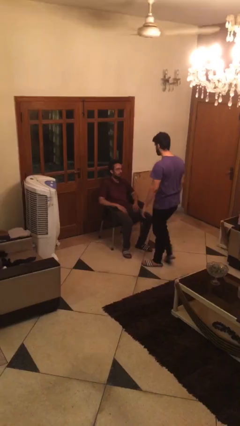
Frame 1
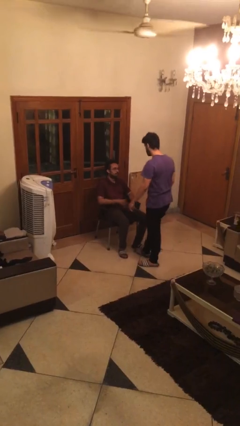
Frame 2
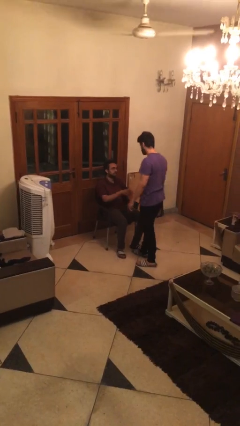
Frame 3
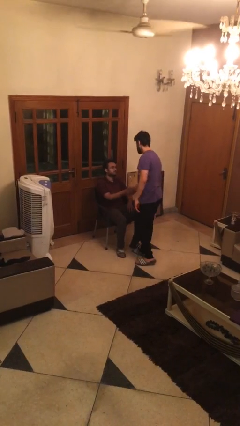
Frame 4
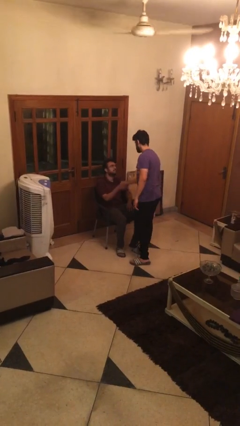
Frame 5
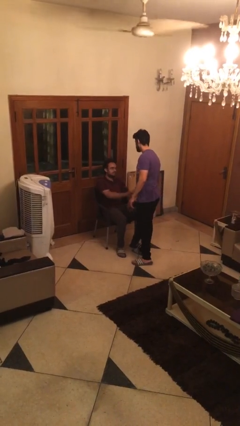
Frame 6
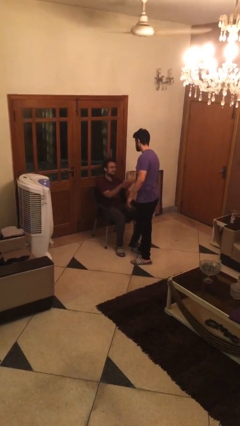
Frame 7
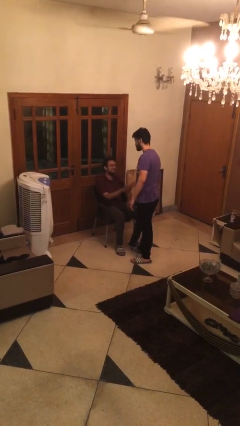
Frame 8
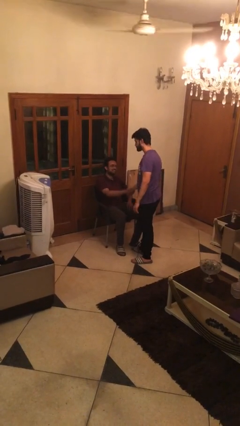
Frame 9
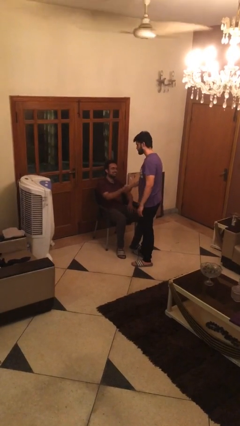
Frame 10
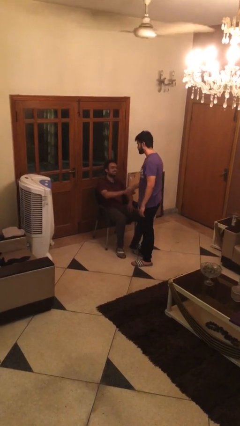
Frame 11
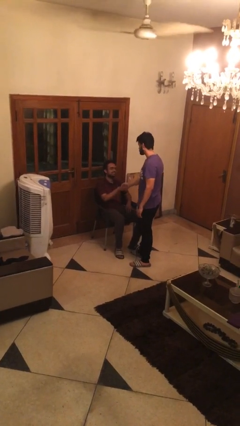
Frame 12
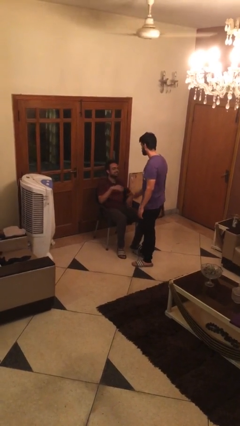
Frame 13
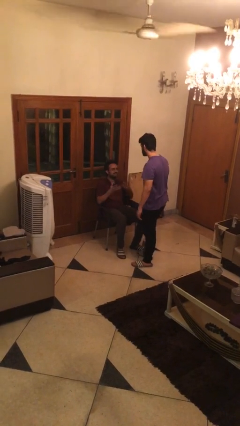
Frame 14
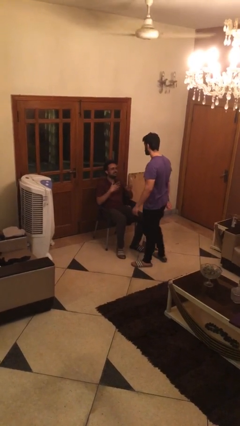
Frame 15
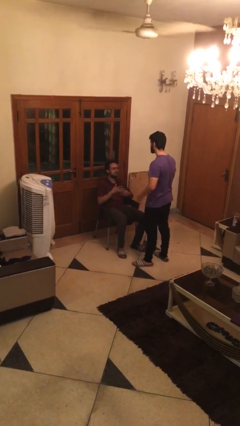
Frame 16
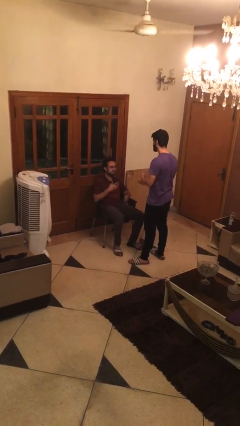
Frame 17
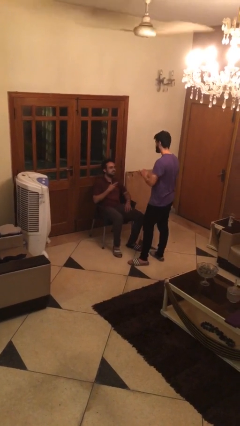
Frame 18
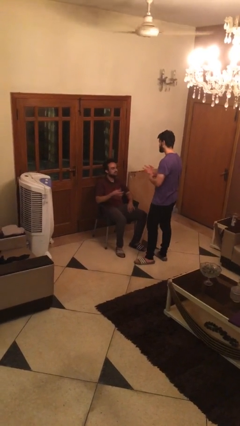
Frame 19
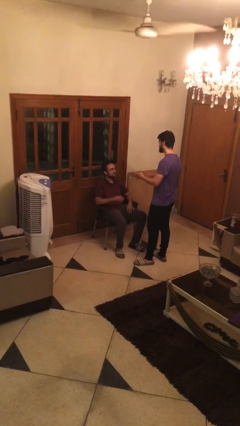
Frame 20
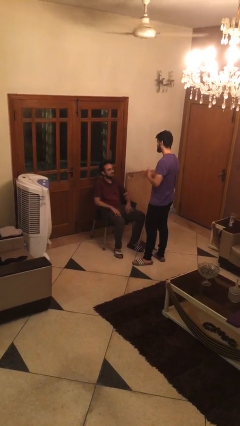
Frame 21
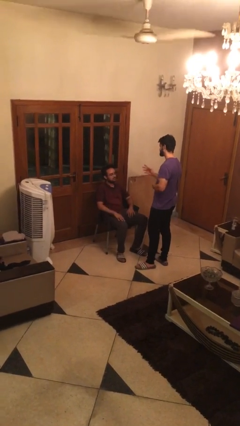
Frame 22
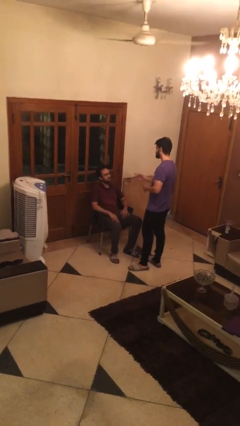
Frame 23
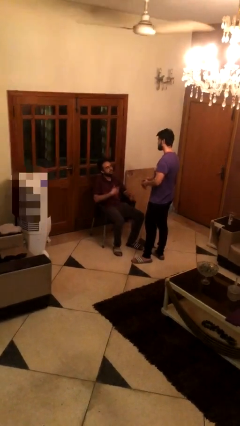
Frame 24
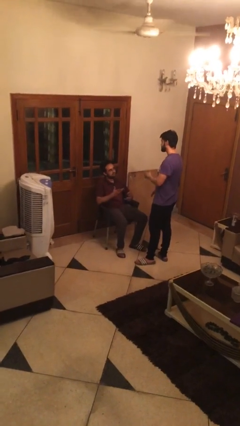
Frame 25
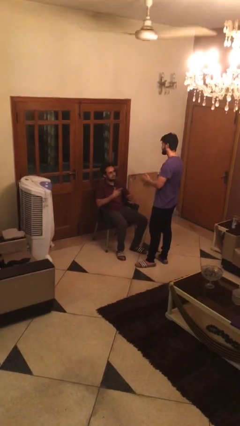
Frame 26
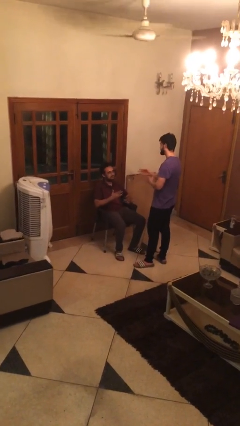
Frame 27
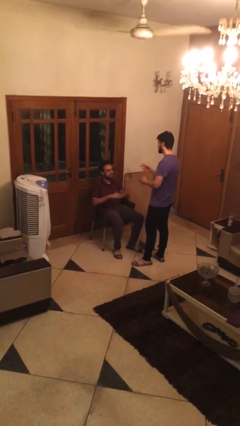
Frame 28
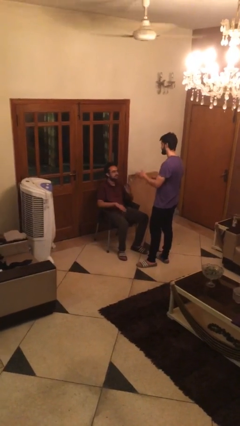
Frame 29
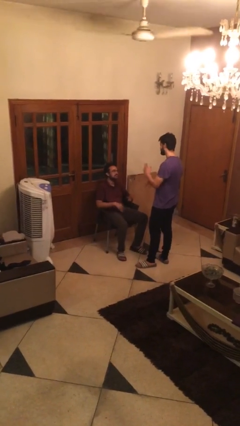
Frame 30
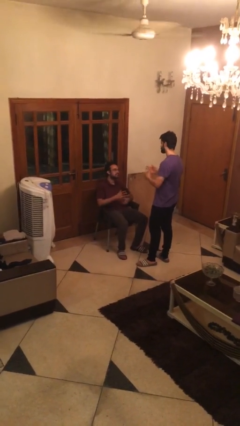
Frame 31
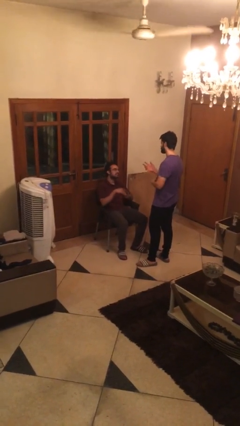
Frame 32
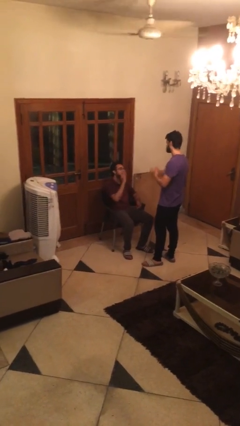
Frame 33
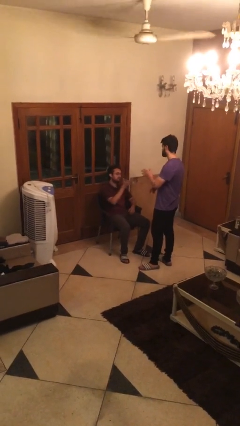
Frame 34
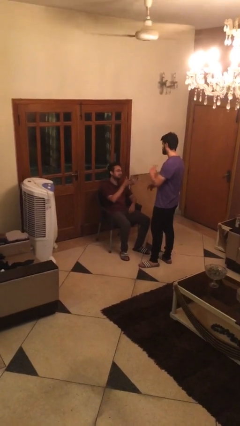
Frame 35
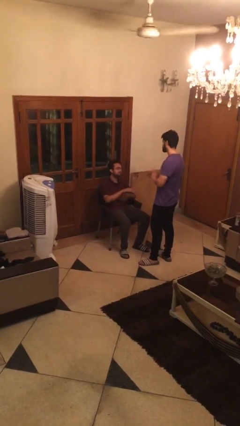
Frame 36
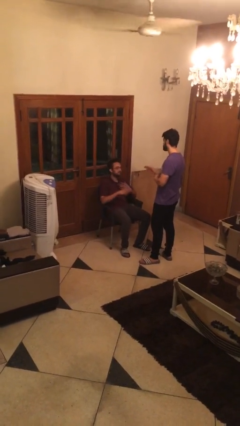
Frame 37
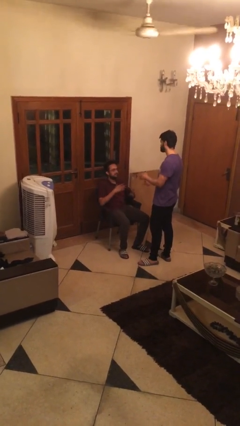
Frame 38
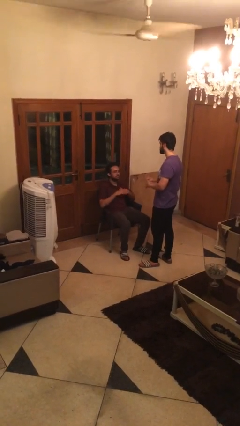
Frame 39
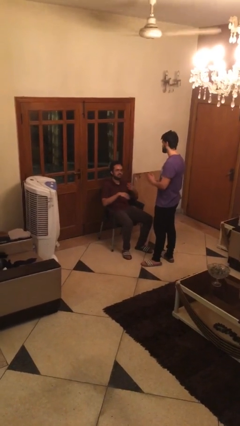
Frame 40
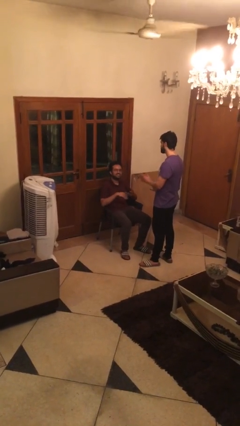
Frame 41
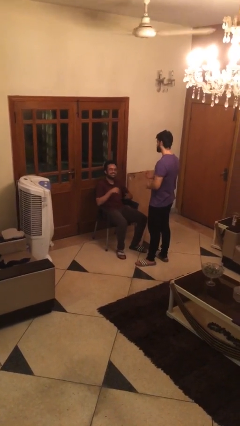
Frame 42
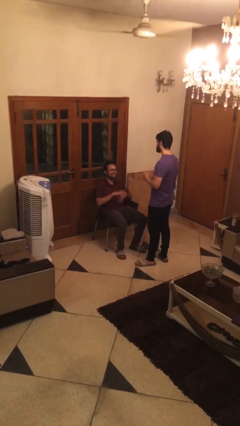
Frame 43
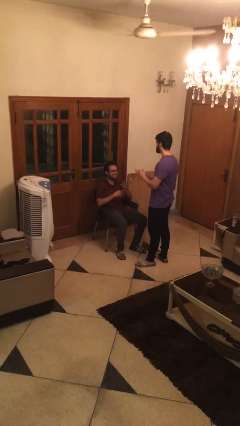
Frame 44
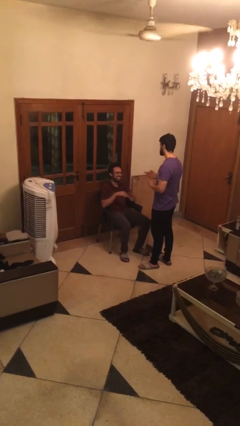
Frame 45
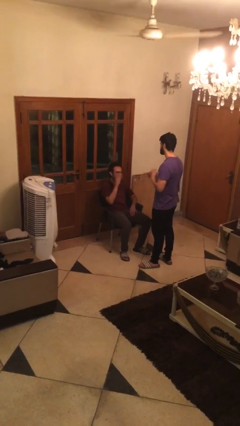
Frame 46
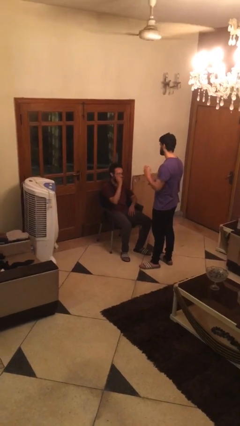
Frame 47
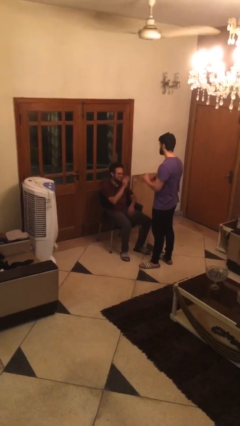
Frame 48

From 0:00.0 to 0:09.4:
person shakes hand

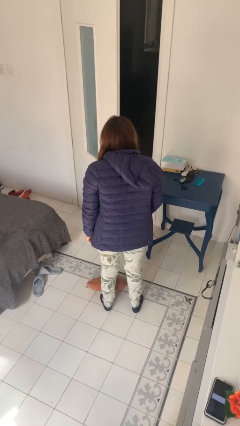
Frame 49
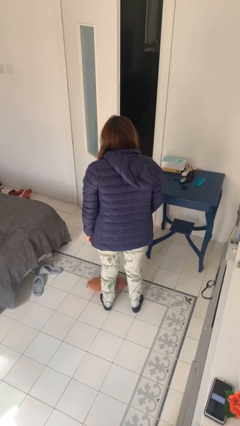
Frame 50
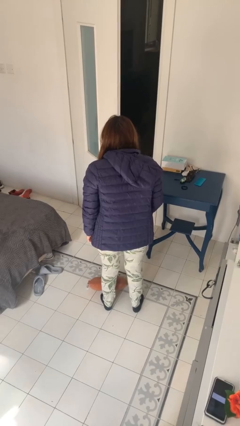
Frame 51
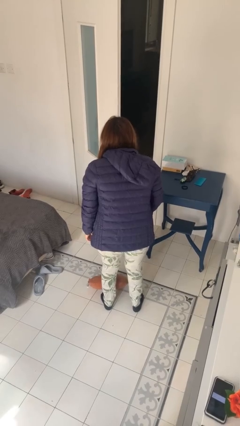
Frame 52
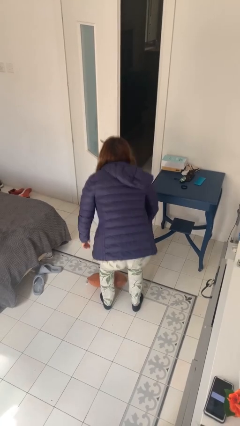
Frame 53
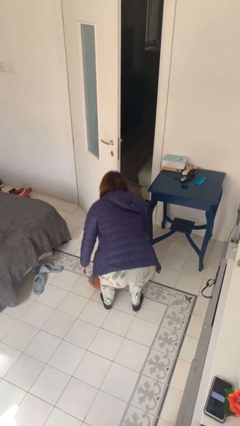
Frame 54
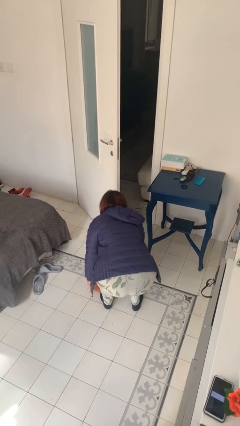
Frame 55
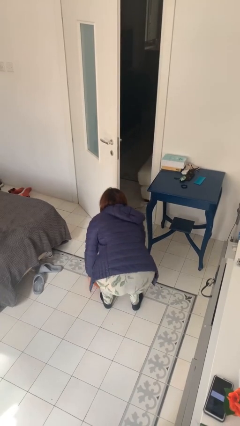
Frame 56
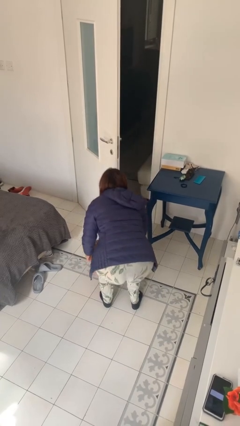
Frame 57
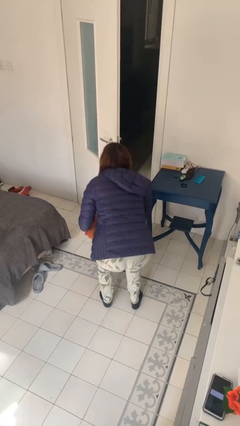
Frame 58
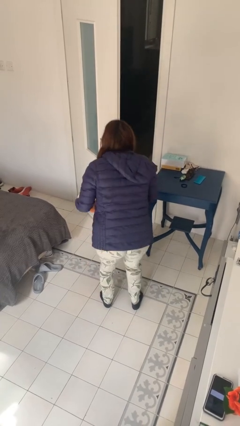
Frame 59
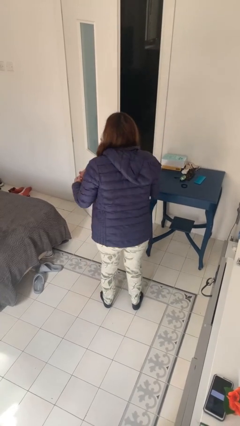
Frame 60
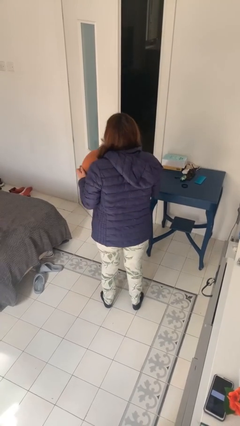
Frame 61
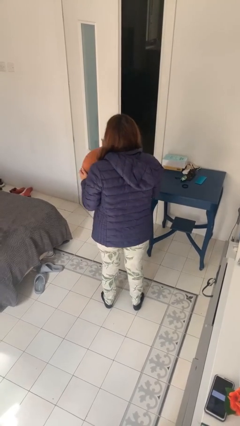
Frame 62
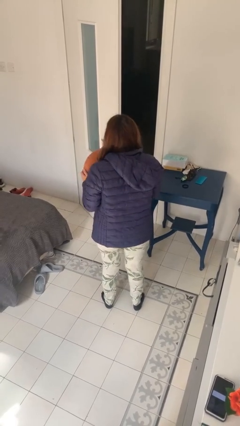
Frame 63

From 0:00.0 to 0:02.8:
person picks up object from floor

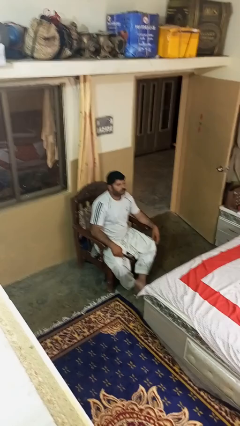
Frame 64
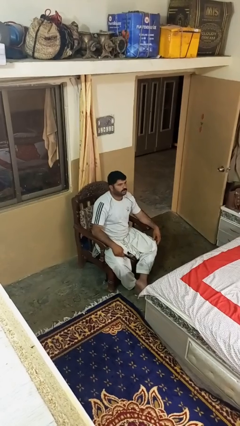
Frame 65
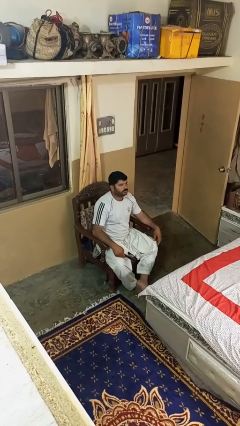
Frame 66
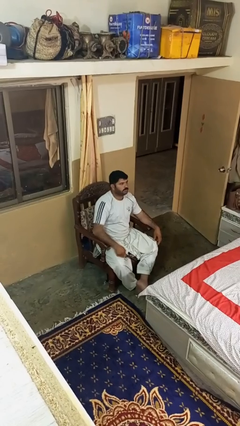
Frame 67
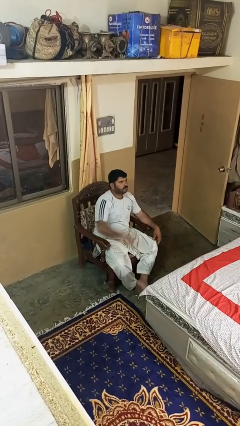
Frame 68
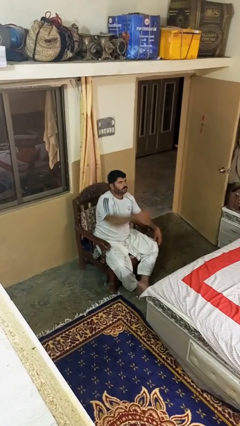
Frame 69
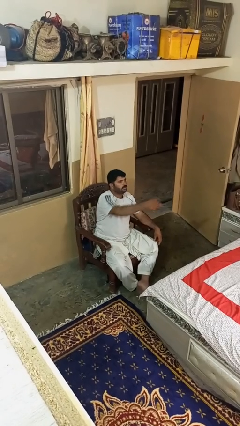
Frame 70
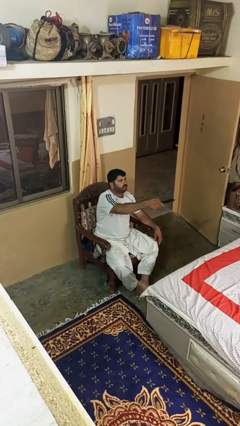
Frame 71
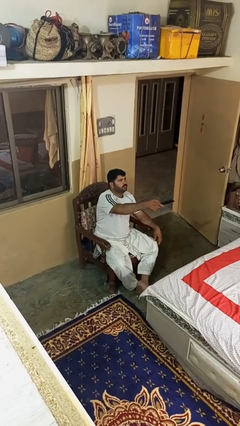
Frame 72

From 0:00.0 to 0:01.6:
person uses television remote

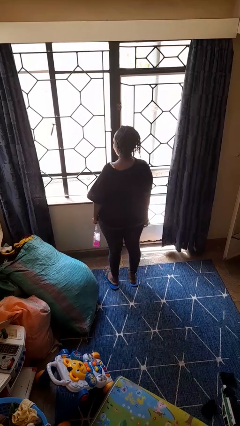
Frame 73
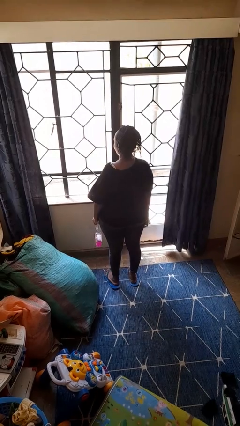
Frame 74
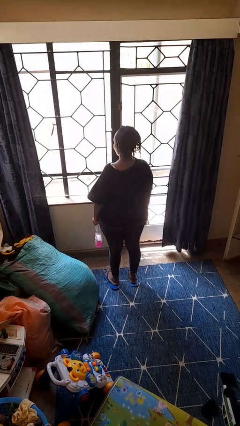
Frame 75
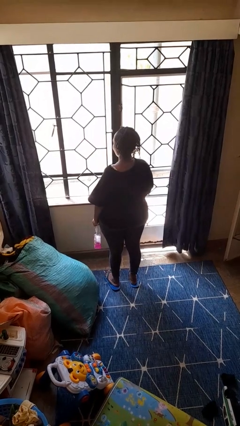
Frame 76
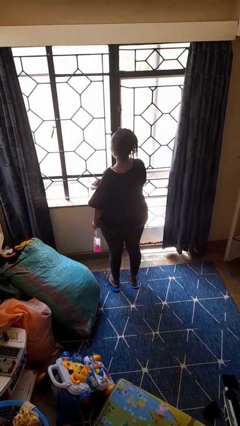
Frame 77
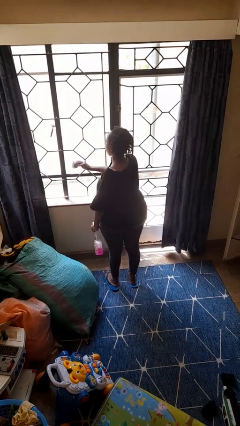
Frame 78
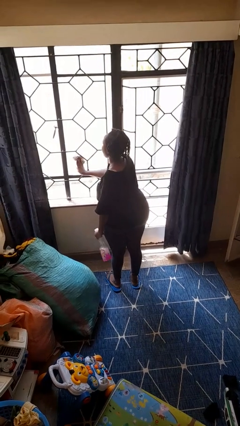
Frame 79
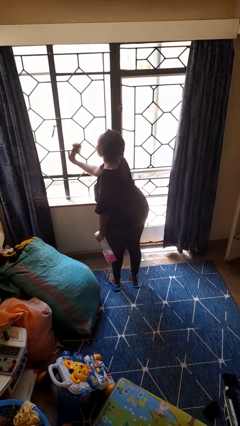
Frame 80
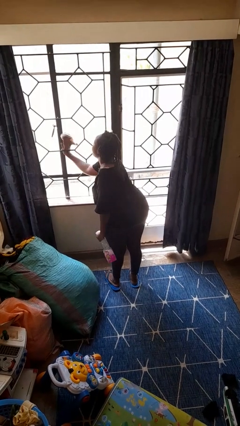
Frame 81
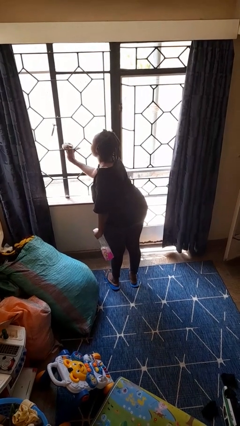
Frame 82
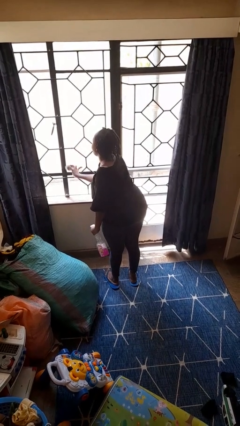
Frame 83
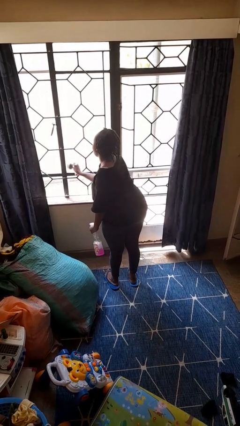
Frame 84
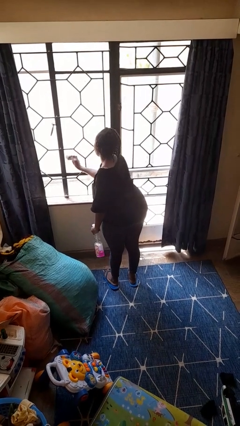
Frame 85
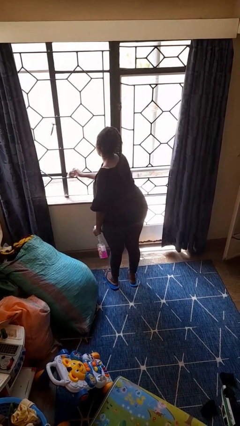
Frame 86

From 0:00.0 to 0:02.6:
person washes window

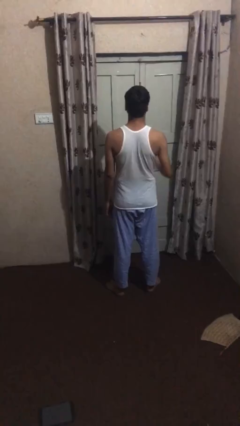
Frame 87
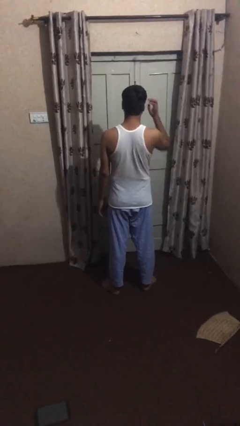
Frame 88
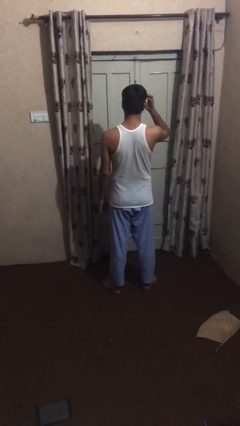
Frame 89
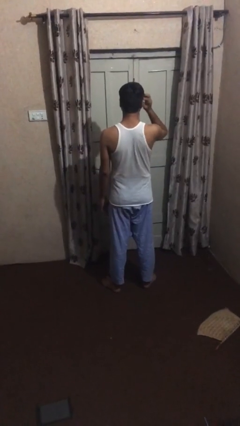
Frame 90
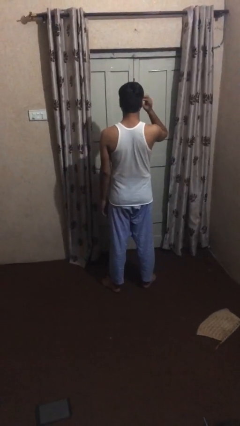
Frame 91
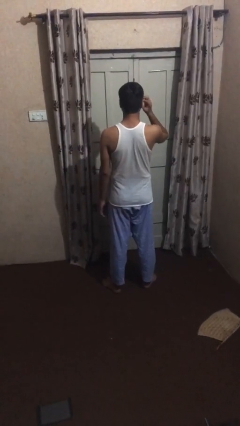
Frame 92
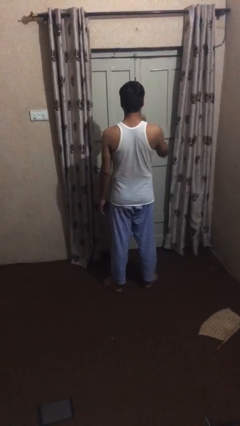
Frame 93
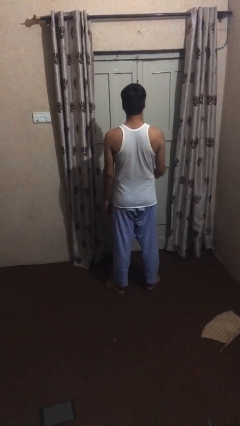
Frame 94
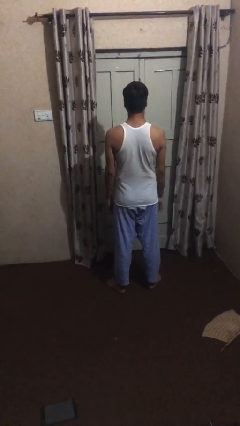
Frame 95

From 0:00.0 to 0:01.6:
person scratches face
